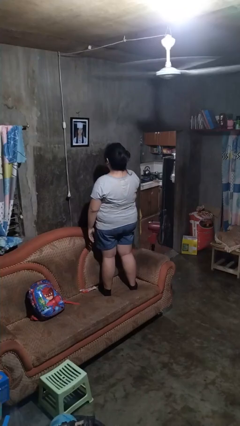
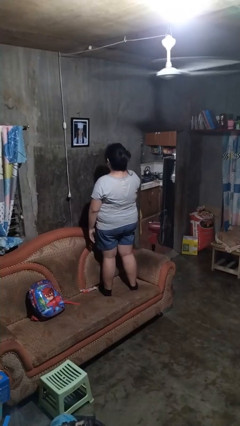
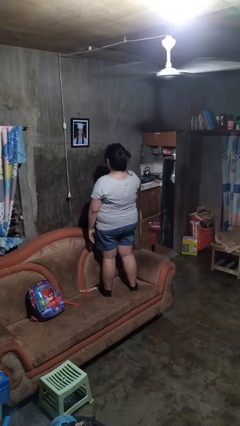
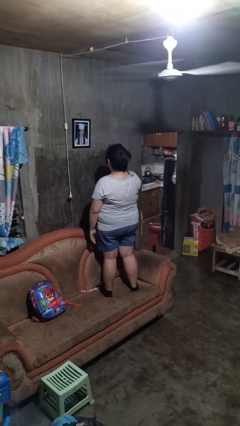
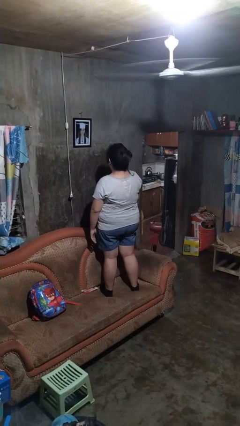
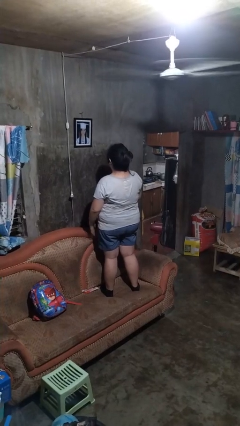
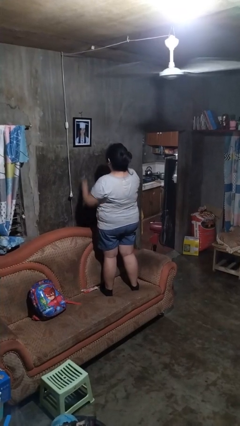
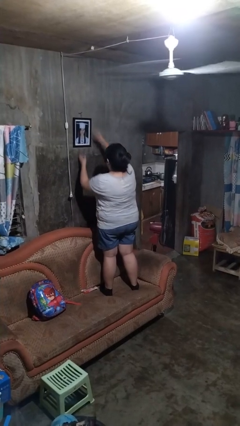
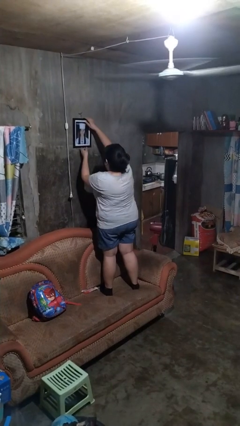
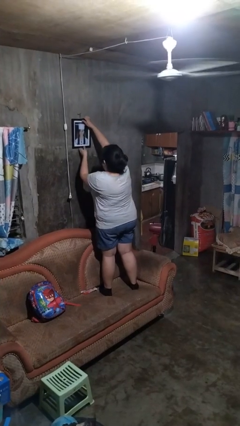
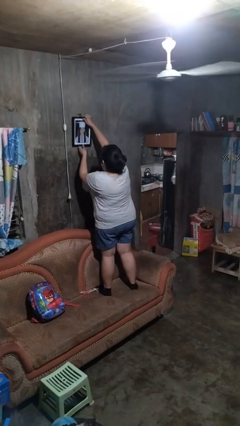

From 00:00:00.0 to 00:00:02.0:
person takes down picture frame

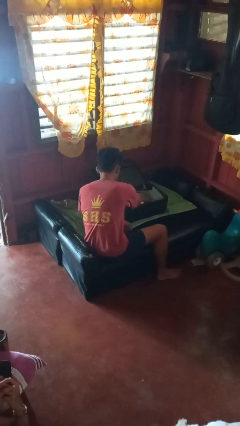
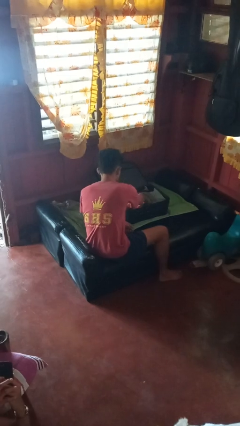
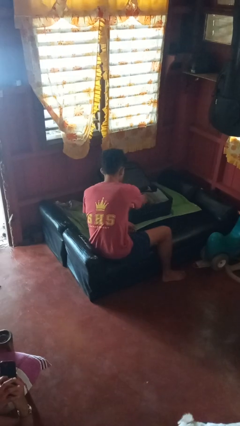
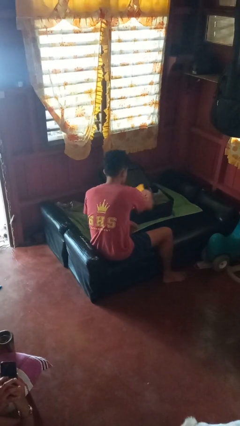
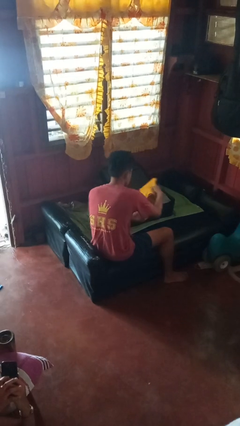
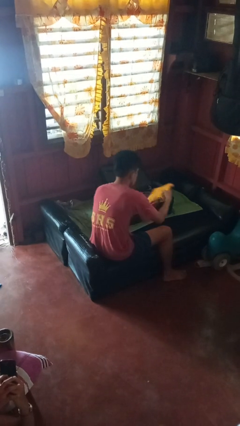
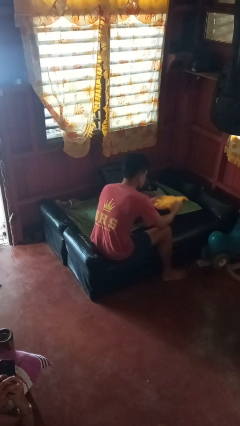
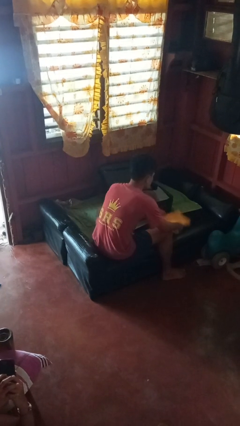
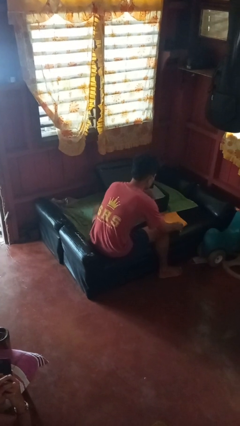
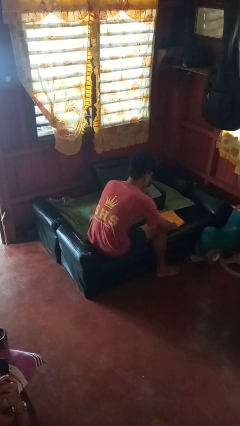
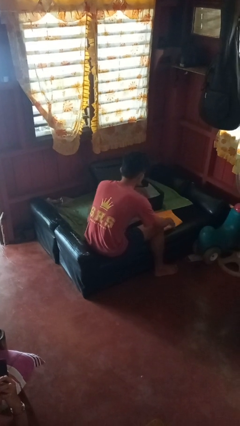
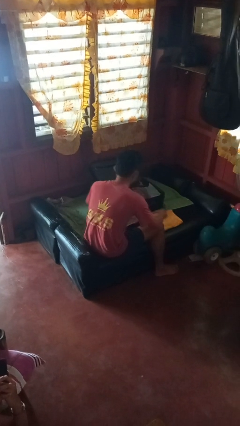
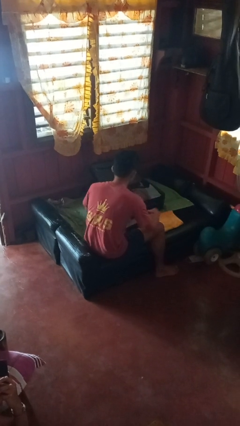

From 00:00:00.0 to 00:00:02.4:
person unloads clothes from suitcase

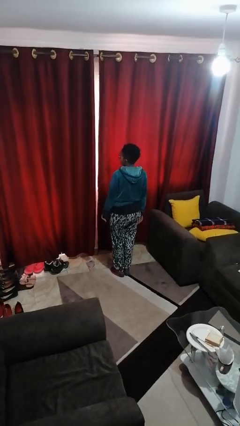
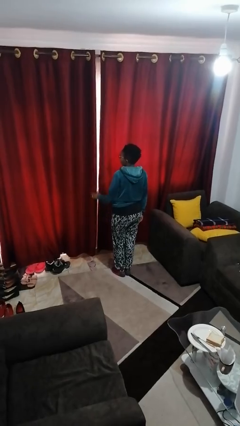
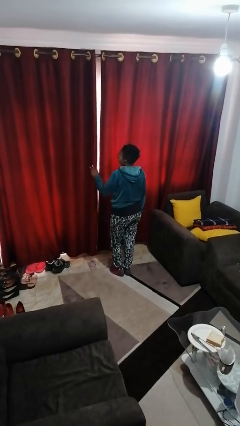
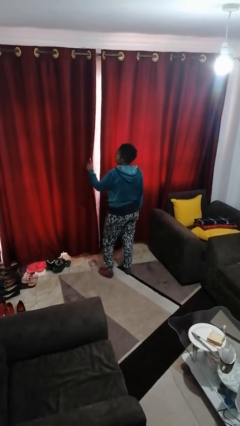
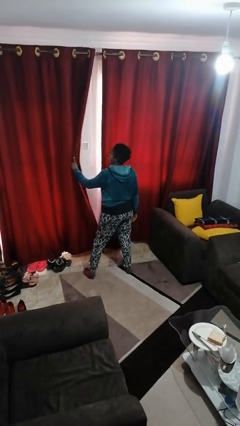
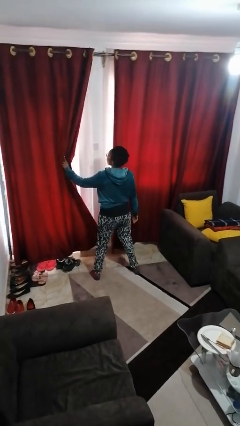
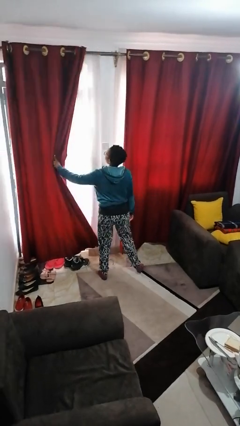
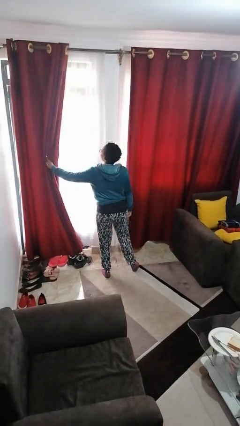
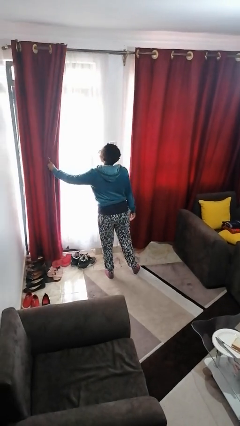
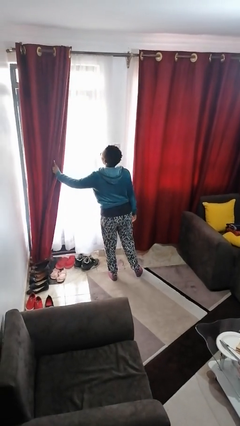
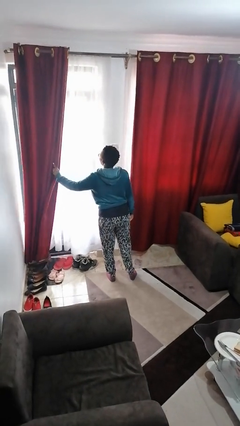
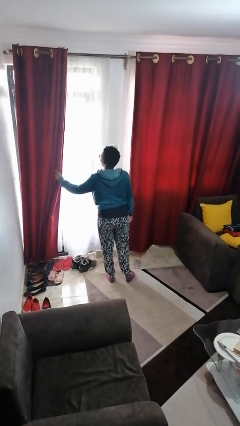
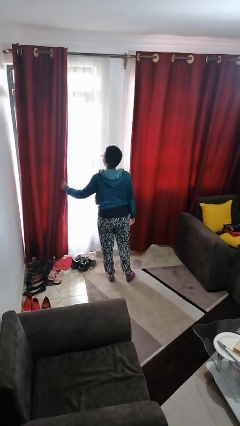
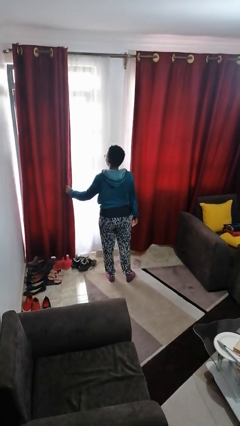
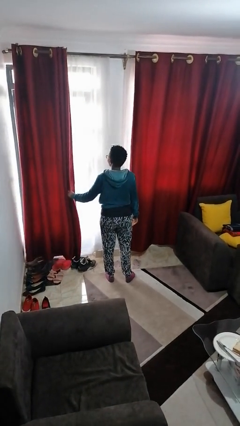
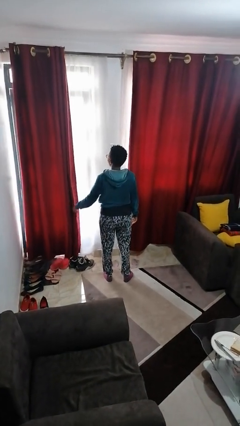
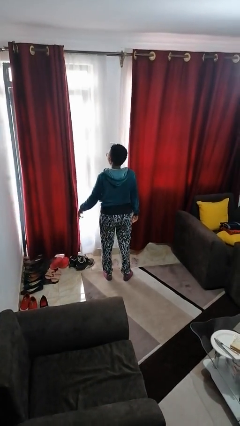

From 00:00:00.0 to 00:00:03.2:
person opens curtains

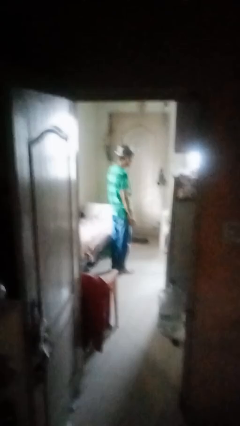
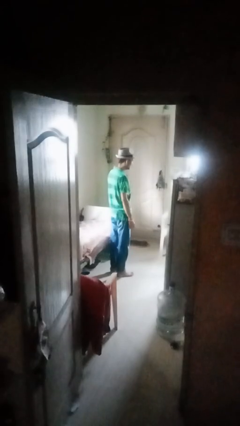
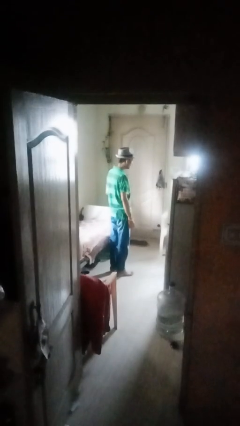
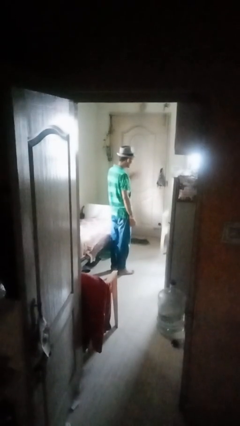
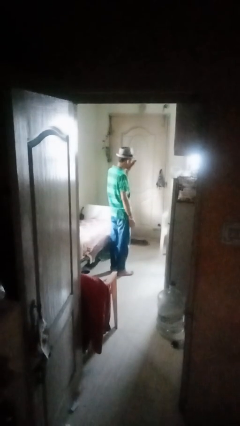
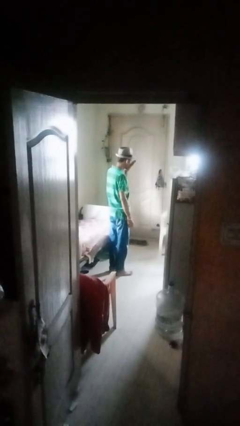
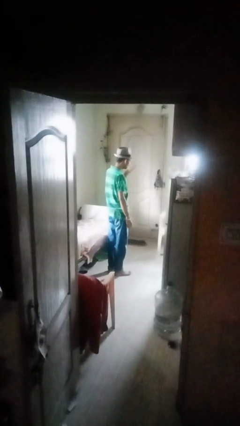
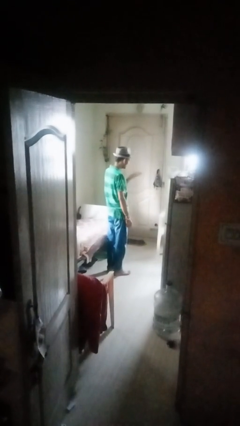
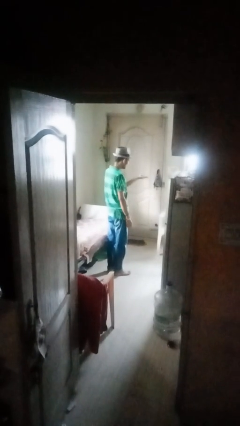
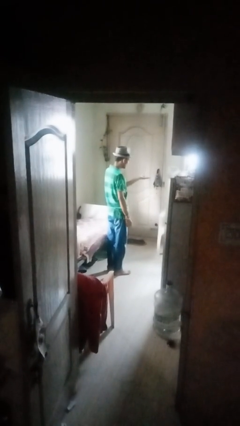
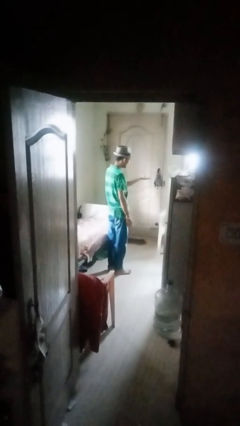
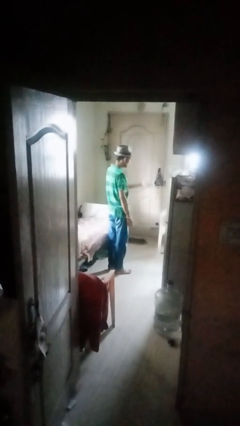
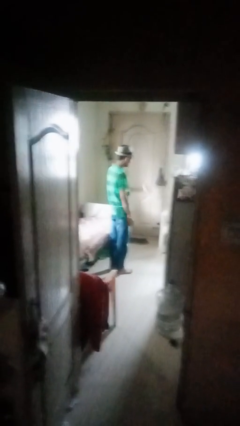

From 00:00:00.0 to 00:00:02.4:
person gestures blow kiss

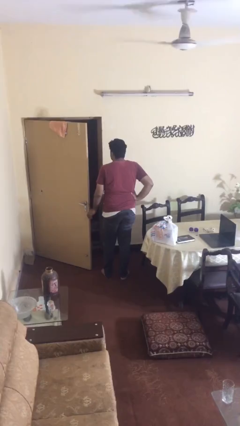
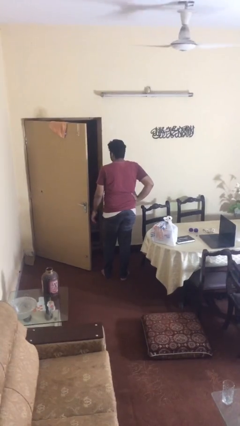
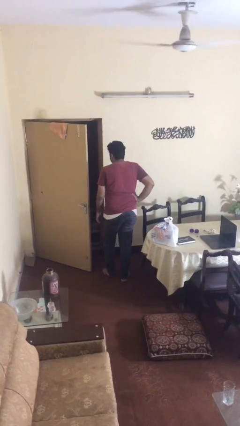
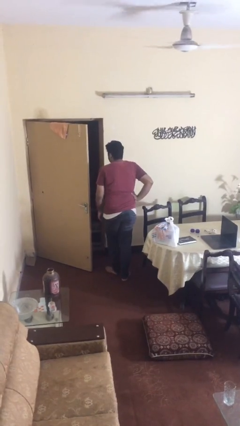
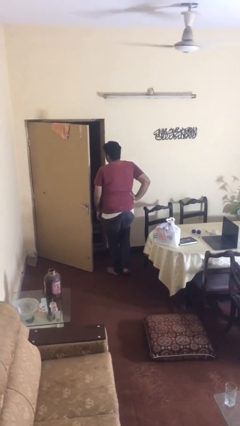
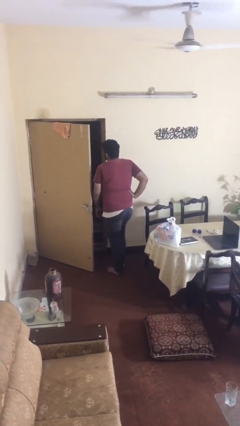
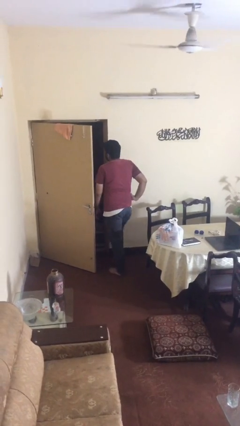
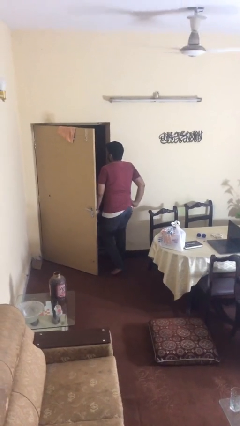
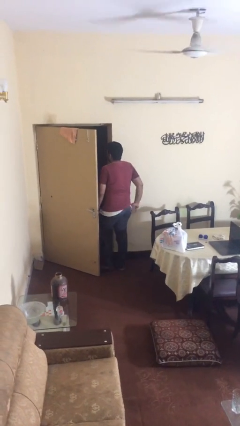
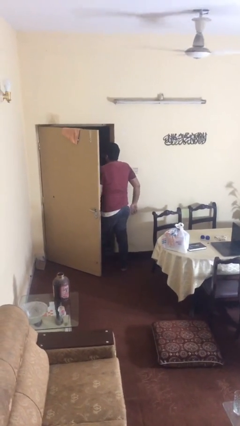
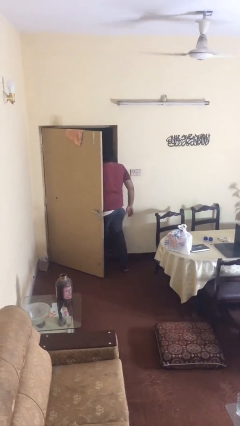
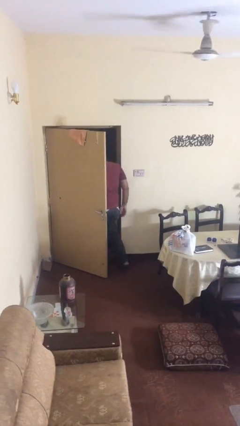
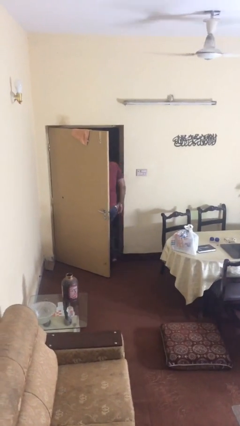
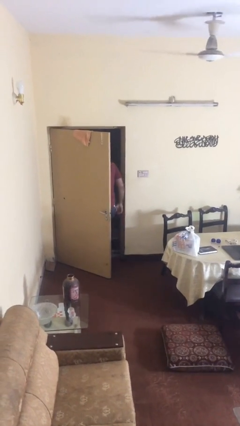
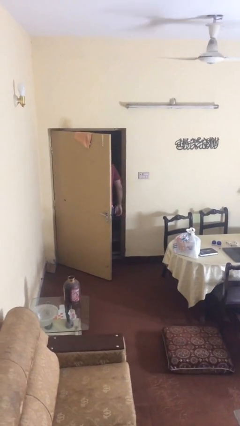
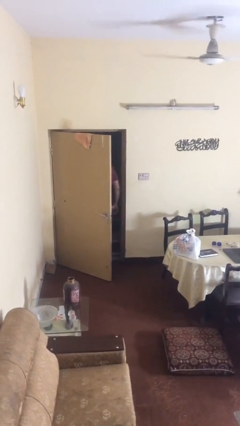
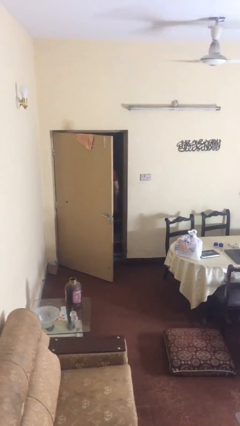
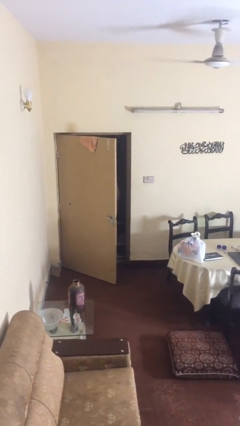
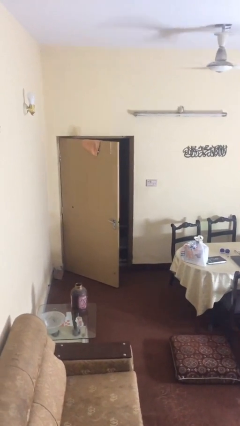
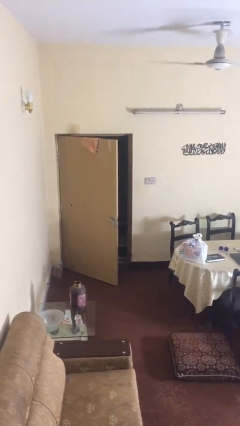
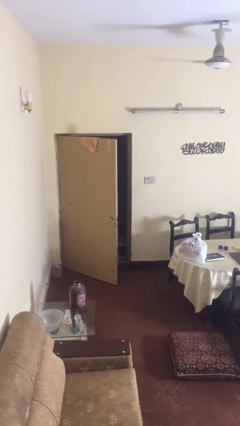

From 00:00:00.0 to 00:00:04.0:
person exits scene through structure

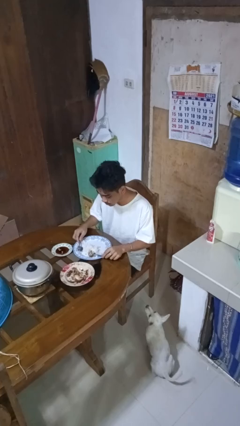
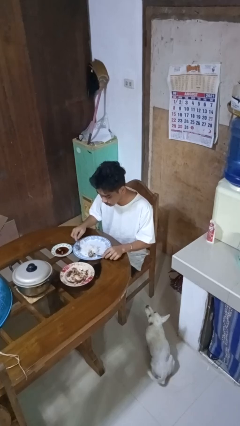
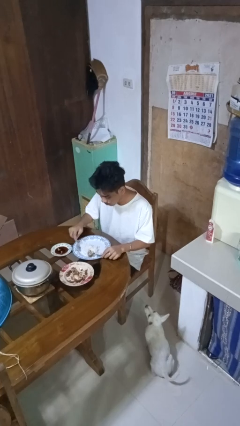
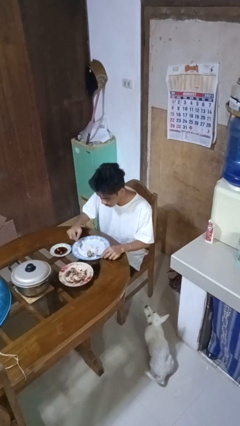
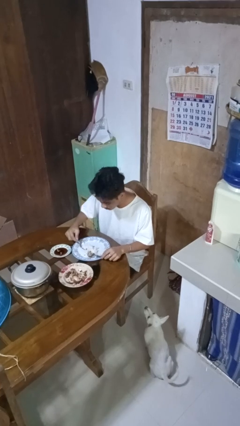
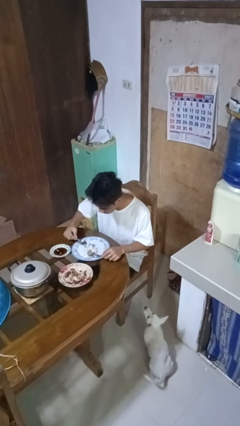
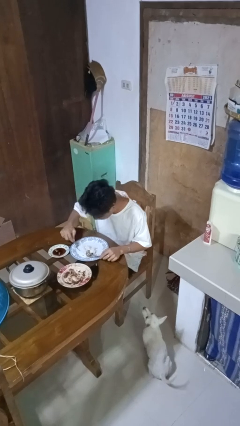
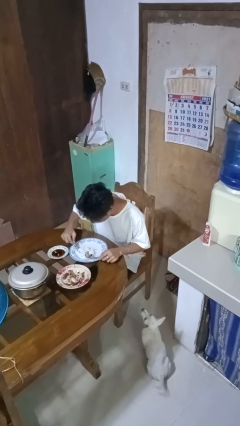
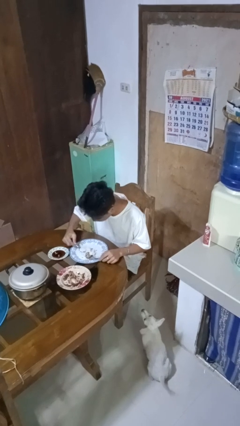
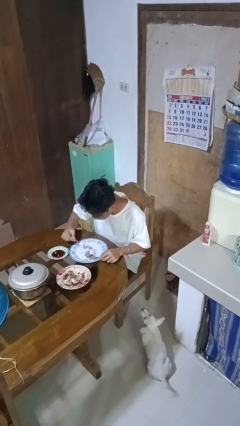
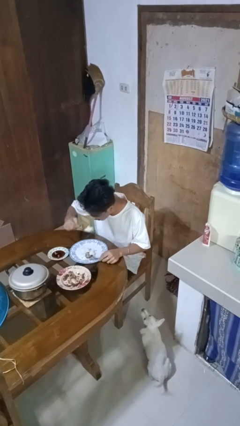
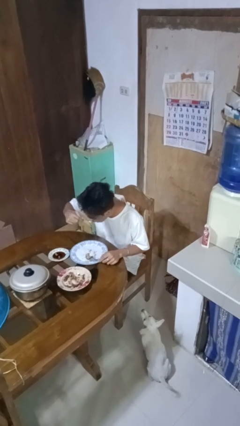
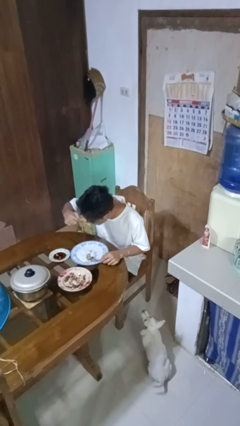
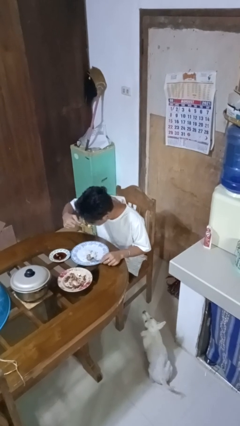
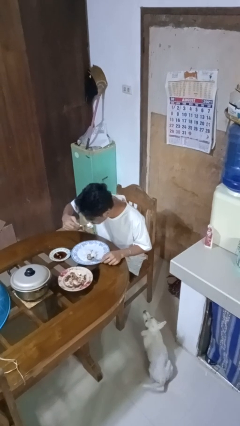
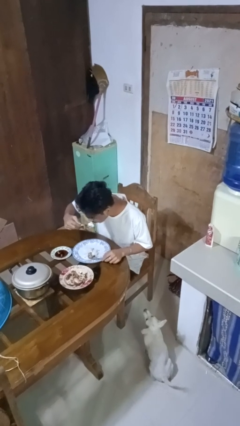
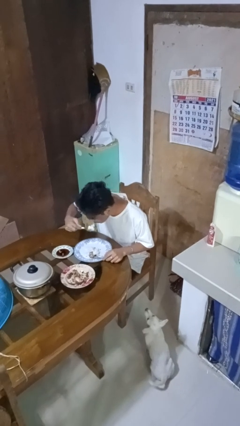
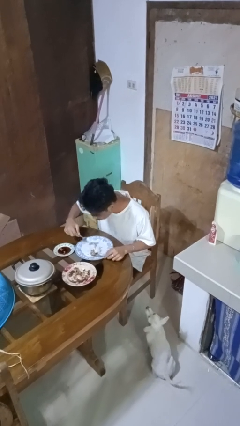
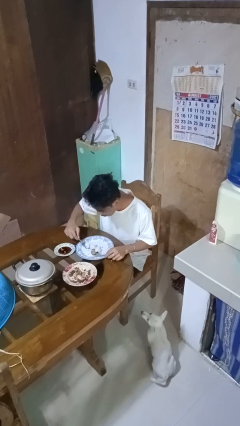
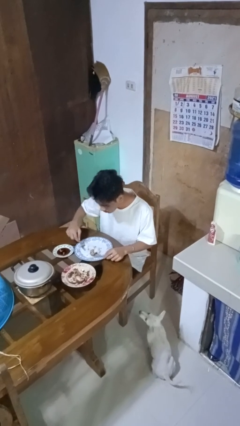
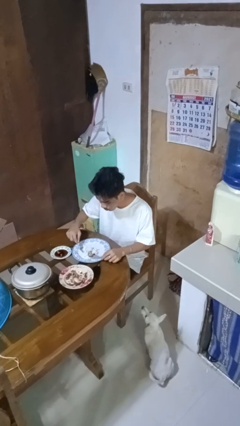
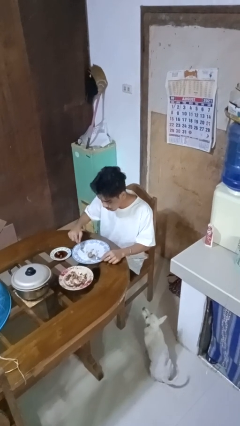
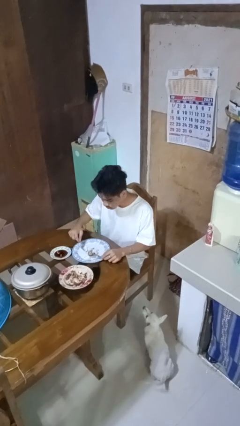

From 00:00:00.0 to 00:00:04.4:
person eats with utensil
